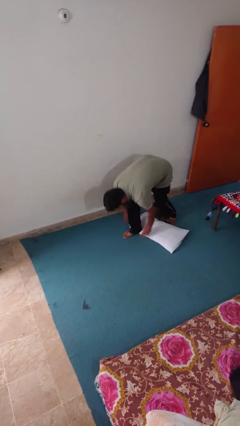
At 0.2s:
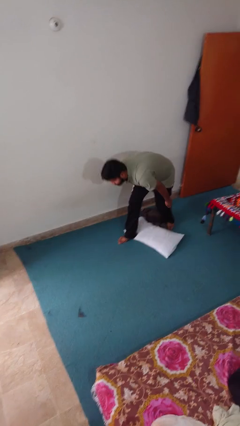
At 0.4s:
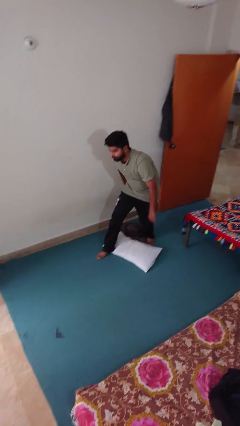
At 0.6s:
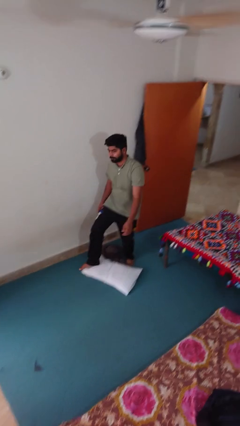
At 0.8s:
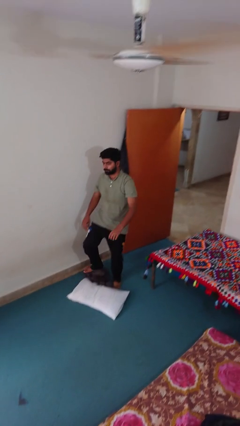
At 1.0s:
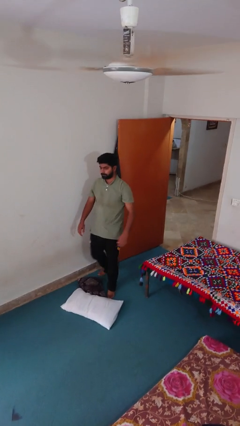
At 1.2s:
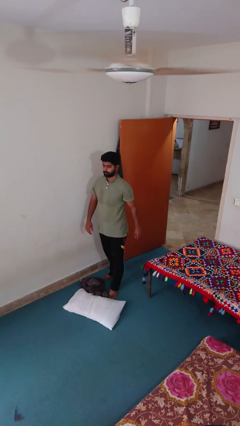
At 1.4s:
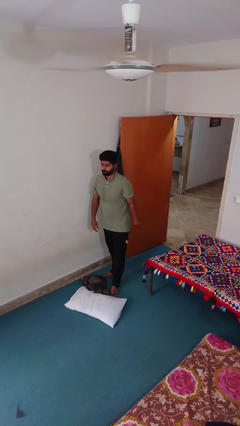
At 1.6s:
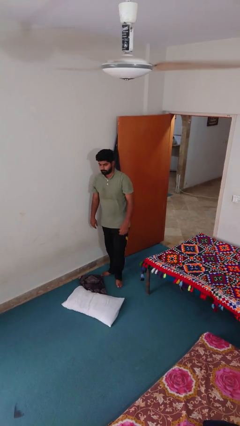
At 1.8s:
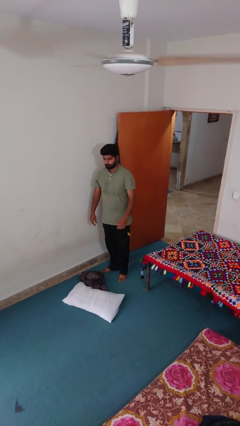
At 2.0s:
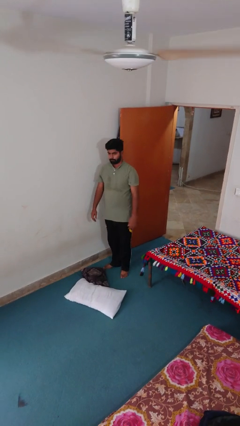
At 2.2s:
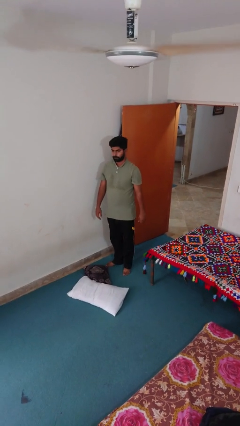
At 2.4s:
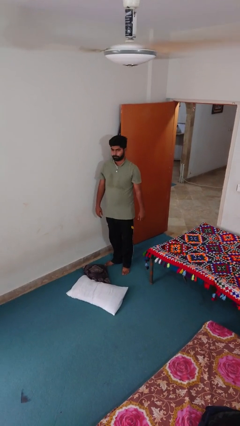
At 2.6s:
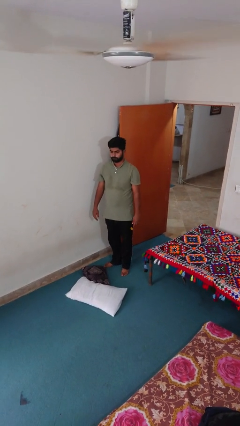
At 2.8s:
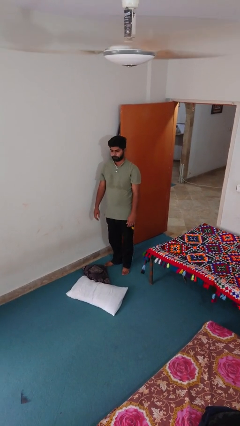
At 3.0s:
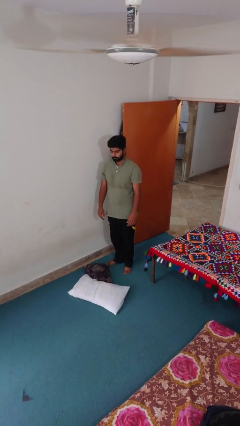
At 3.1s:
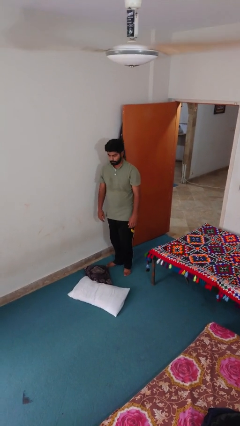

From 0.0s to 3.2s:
person stands up from floor

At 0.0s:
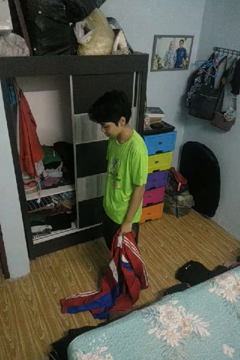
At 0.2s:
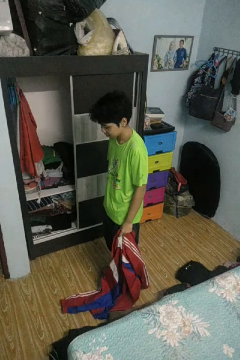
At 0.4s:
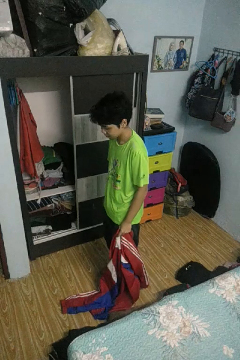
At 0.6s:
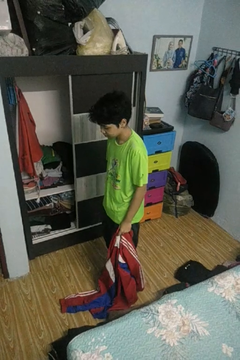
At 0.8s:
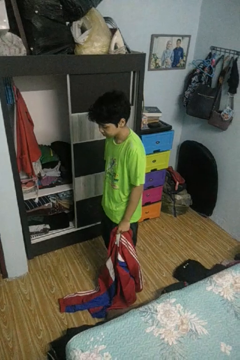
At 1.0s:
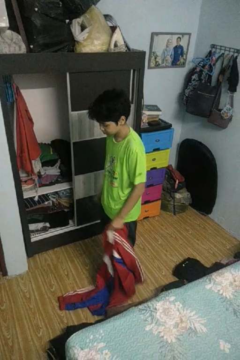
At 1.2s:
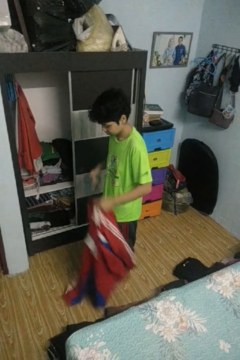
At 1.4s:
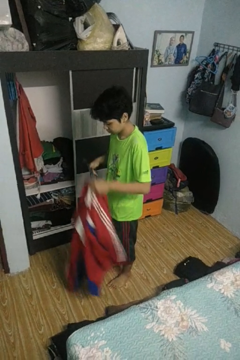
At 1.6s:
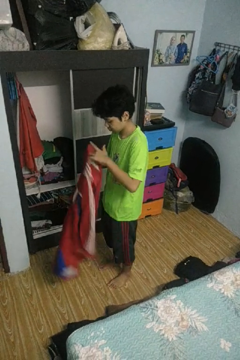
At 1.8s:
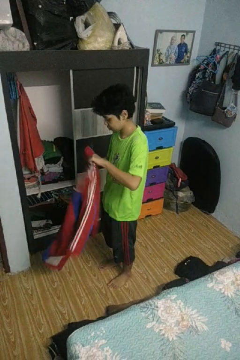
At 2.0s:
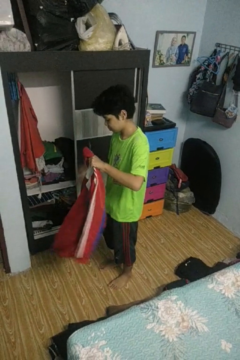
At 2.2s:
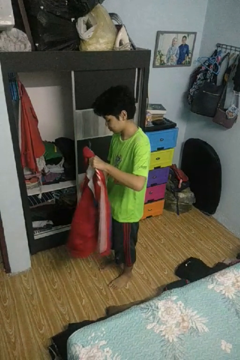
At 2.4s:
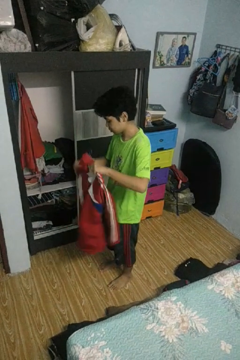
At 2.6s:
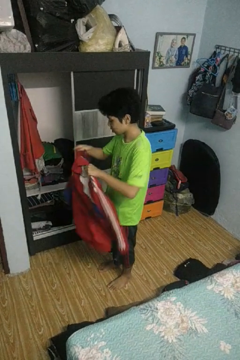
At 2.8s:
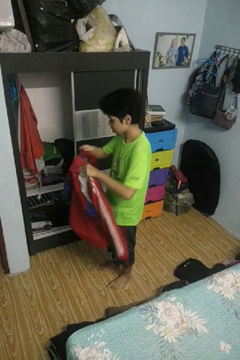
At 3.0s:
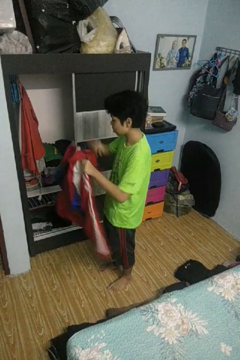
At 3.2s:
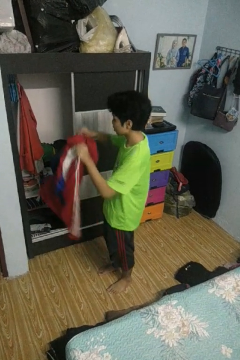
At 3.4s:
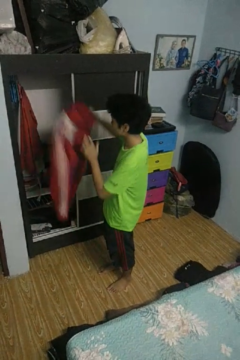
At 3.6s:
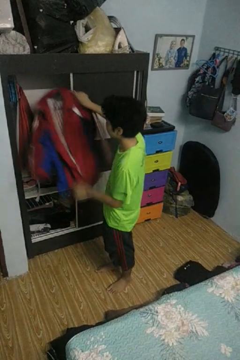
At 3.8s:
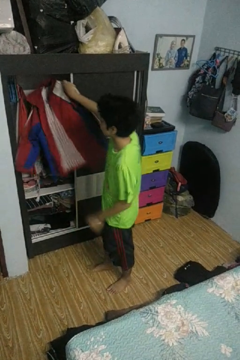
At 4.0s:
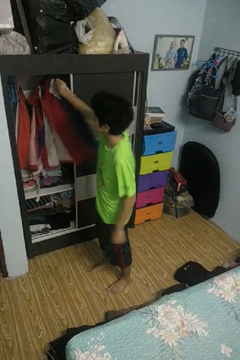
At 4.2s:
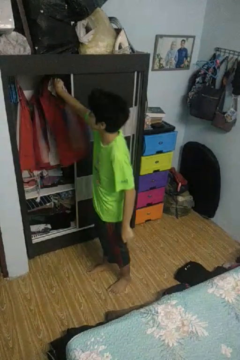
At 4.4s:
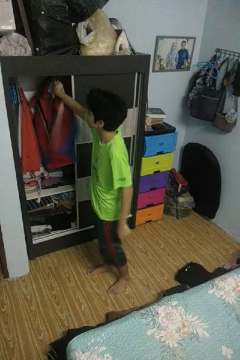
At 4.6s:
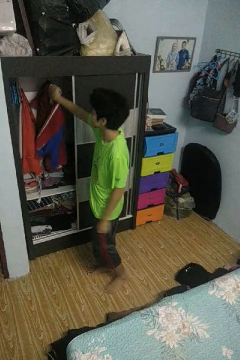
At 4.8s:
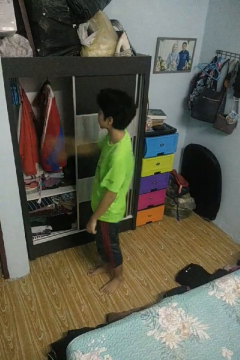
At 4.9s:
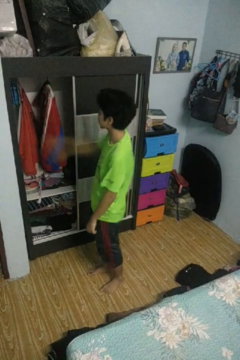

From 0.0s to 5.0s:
person puts clothes into closet

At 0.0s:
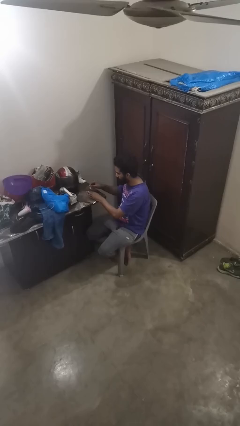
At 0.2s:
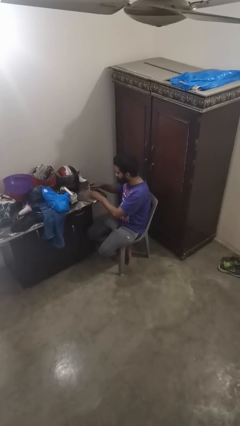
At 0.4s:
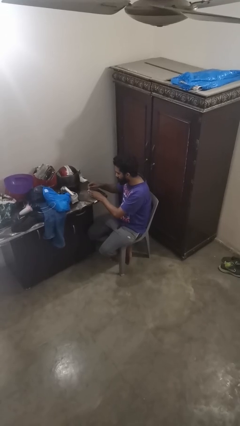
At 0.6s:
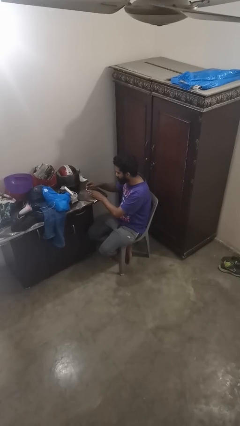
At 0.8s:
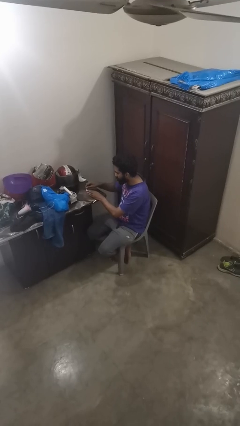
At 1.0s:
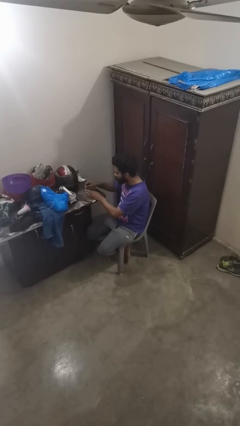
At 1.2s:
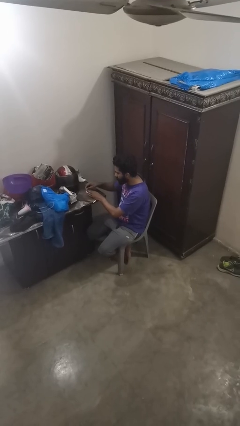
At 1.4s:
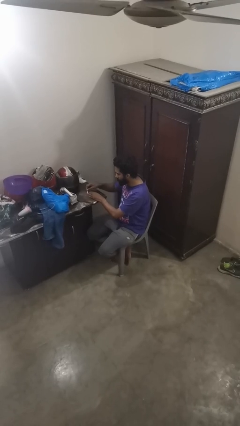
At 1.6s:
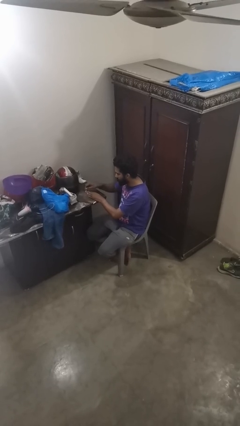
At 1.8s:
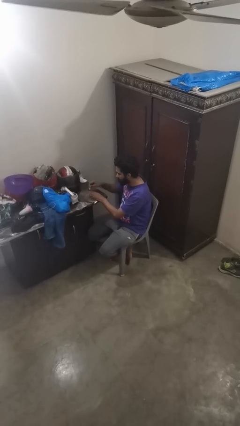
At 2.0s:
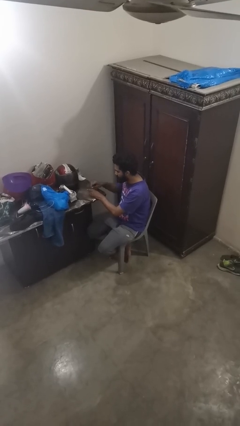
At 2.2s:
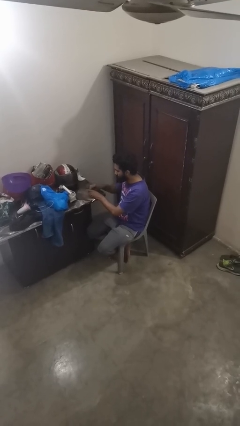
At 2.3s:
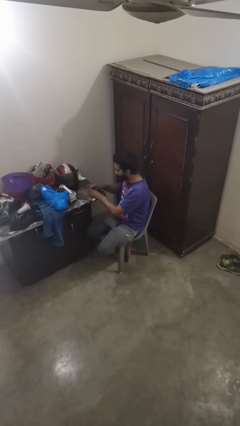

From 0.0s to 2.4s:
person paints fingernails

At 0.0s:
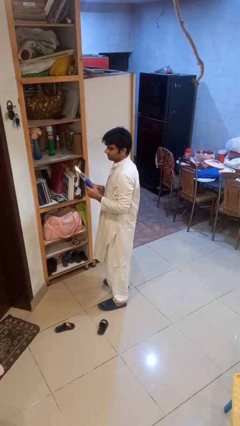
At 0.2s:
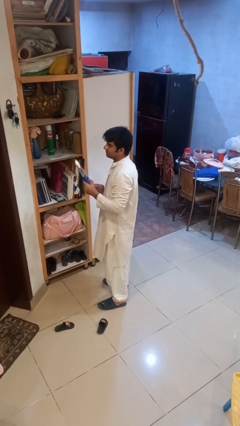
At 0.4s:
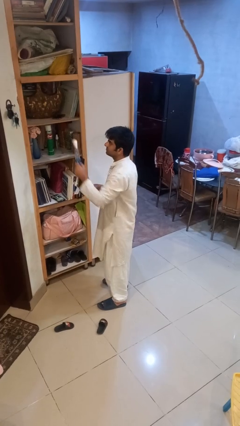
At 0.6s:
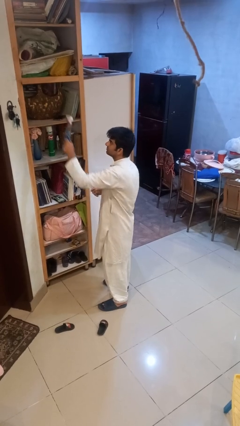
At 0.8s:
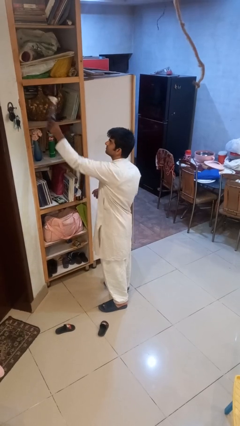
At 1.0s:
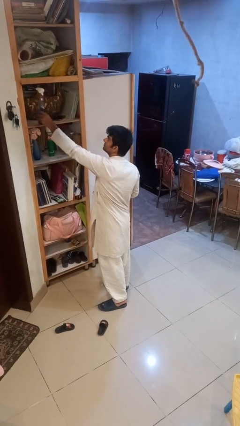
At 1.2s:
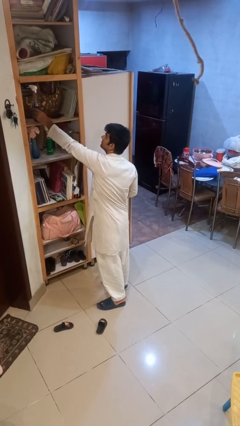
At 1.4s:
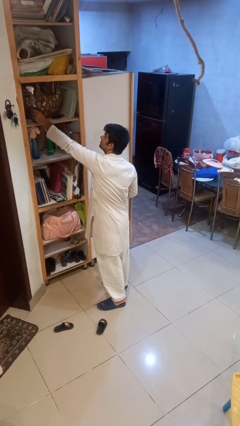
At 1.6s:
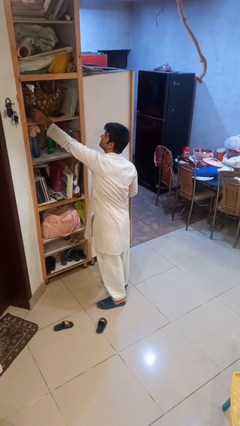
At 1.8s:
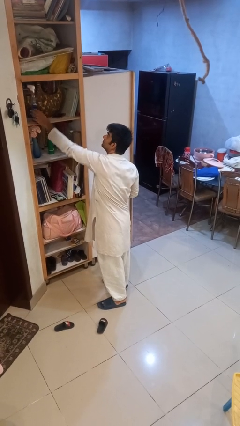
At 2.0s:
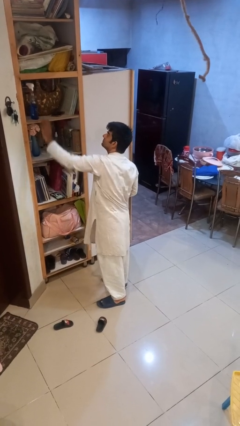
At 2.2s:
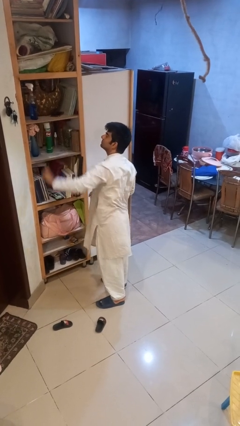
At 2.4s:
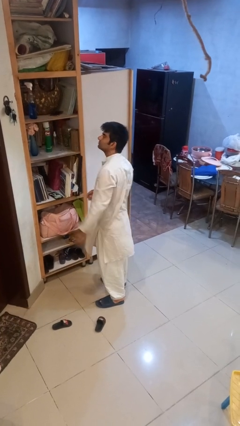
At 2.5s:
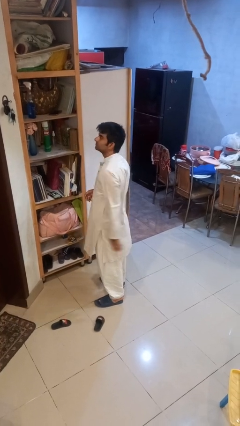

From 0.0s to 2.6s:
person puts down object on shelf

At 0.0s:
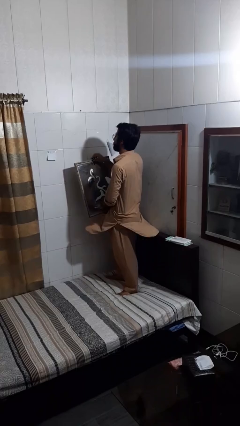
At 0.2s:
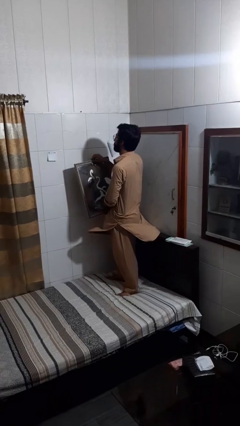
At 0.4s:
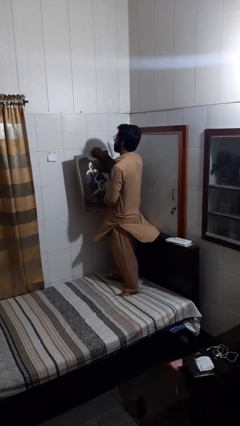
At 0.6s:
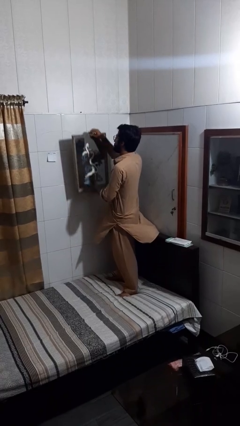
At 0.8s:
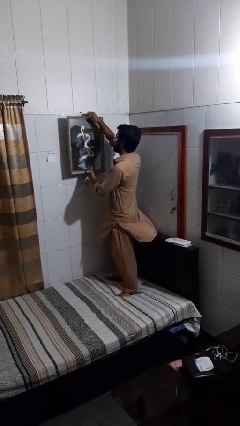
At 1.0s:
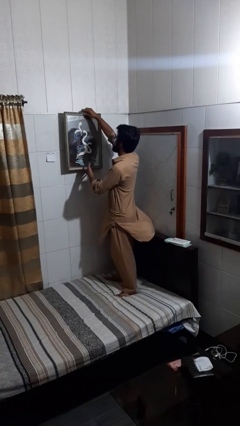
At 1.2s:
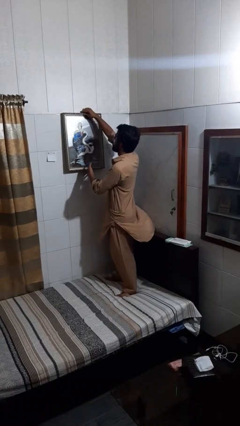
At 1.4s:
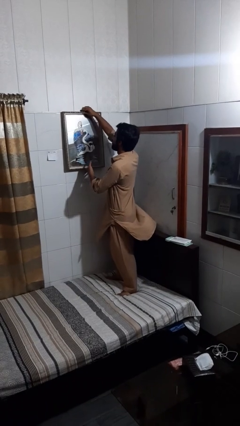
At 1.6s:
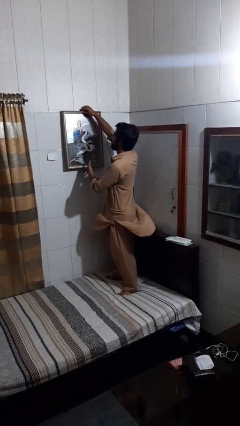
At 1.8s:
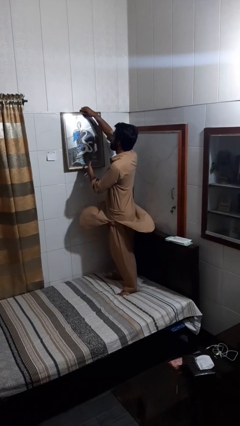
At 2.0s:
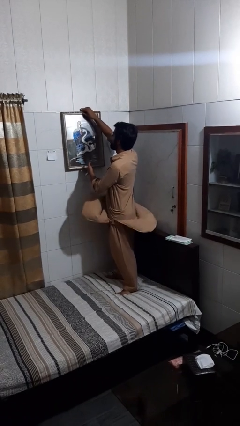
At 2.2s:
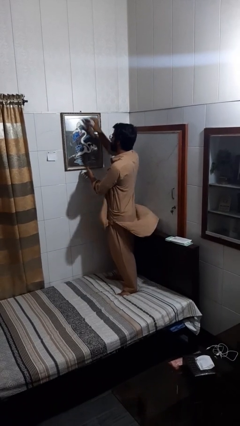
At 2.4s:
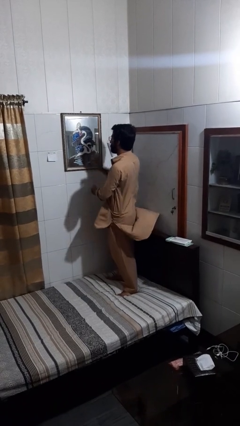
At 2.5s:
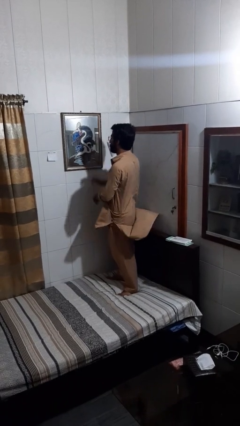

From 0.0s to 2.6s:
person puts up picture frame

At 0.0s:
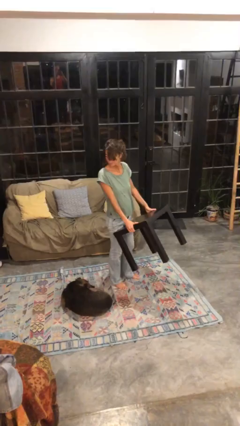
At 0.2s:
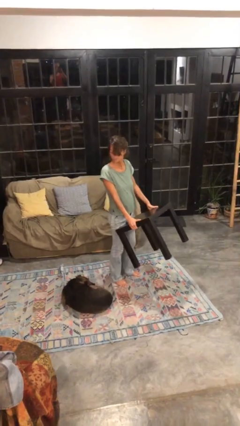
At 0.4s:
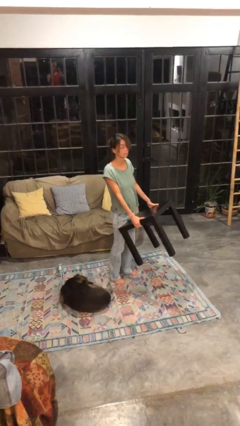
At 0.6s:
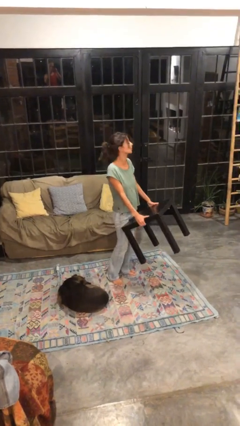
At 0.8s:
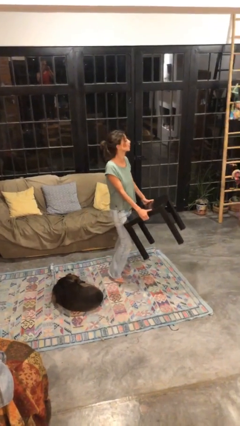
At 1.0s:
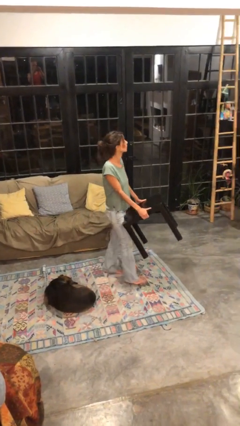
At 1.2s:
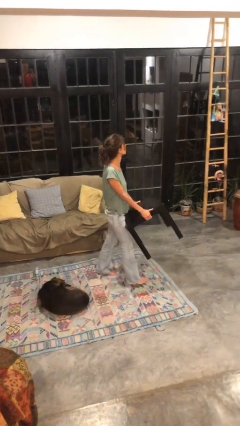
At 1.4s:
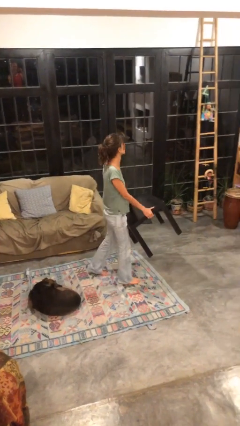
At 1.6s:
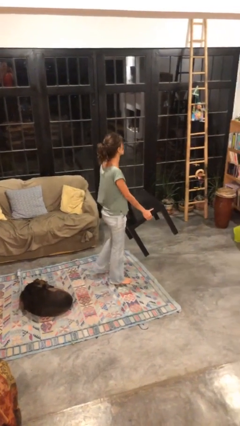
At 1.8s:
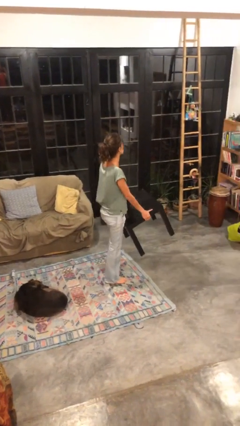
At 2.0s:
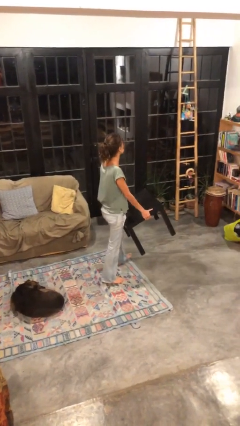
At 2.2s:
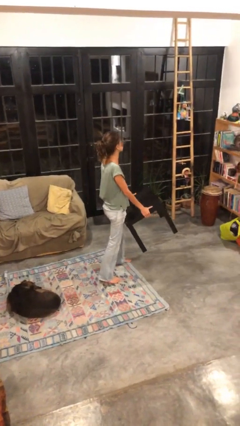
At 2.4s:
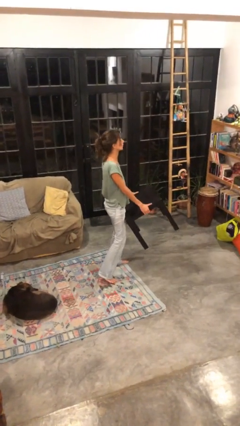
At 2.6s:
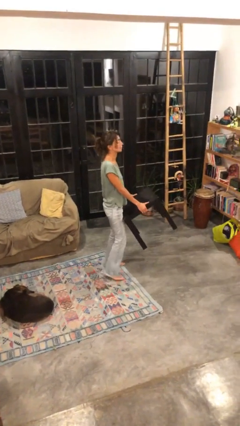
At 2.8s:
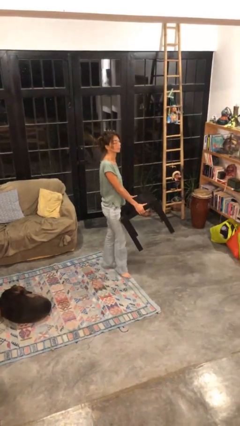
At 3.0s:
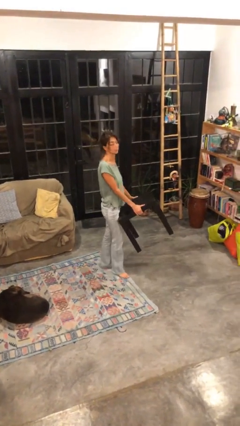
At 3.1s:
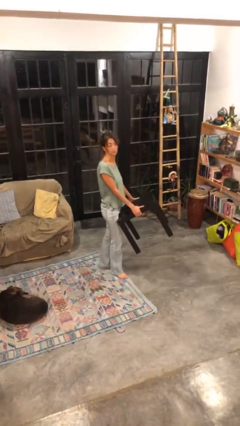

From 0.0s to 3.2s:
person carries furniture
